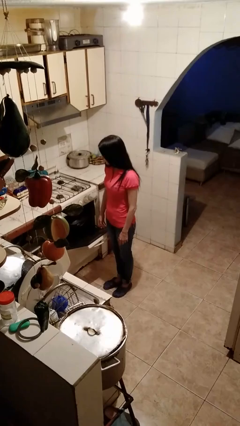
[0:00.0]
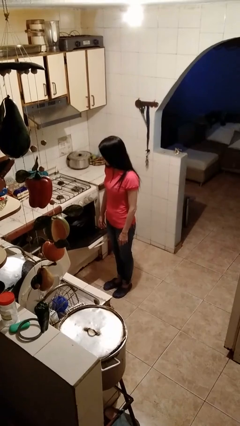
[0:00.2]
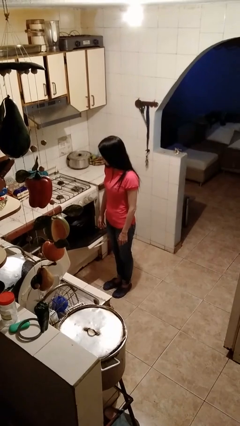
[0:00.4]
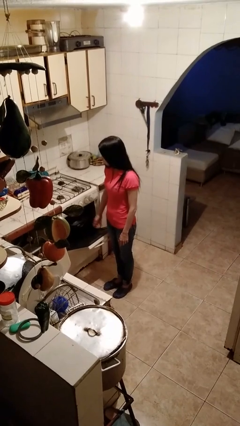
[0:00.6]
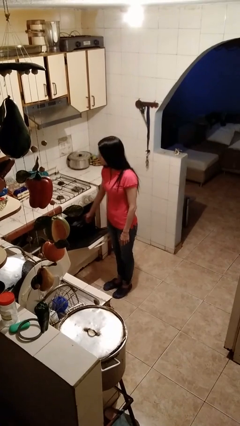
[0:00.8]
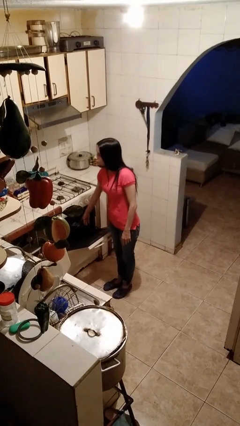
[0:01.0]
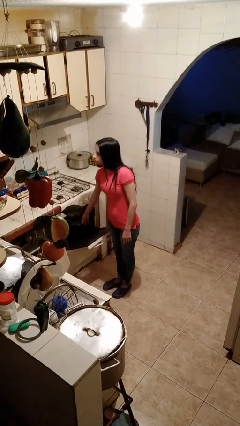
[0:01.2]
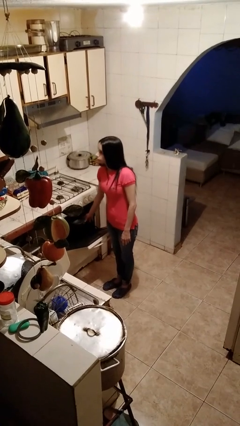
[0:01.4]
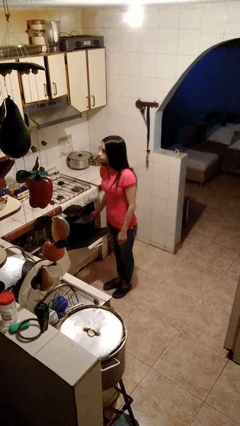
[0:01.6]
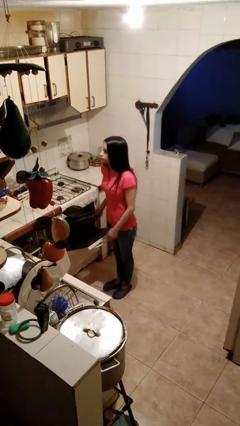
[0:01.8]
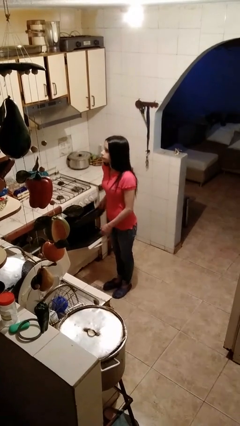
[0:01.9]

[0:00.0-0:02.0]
person takes object from oven

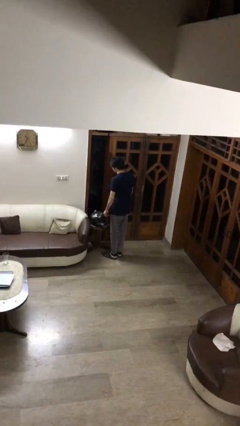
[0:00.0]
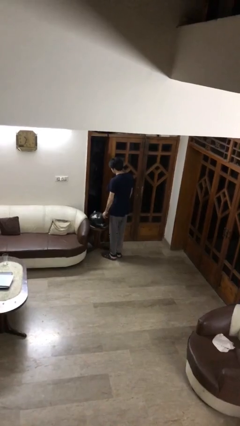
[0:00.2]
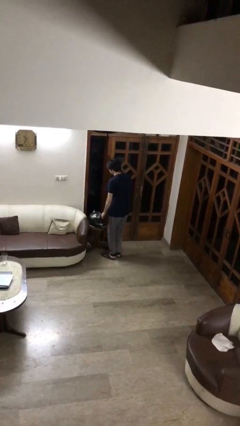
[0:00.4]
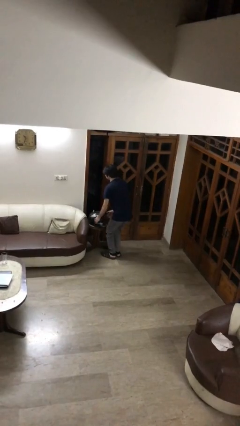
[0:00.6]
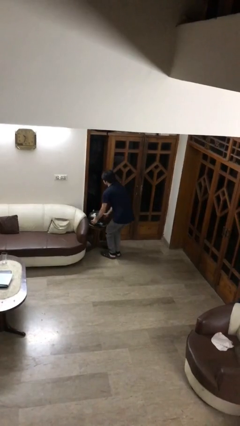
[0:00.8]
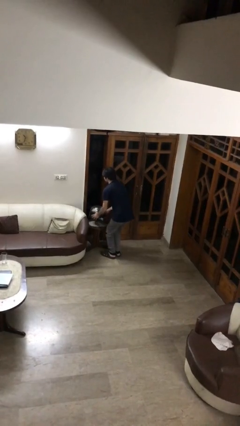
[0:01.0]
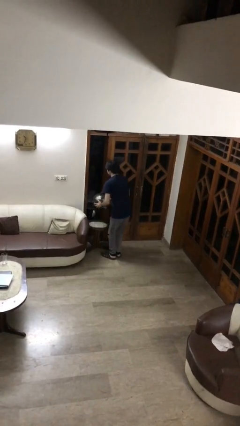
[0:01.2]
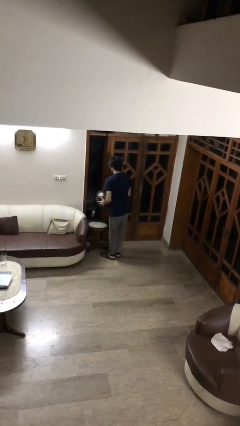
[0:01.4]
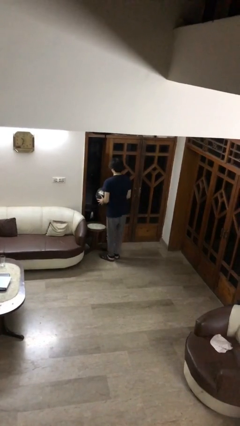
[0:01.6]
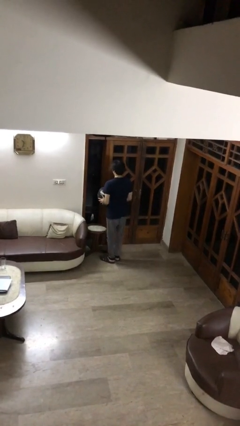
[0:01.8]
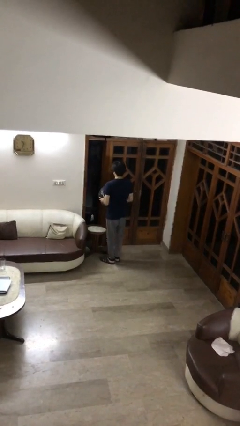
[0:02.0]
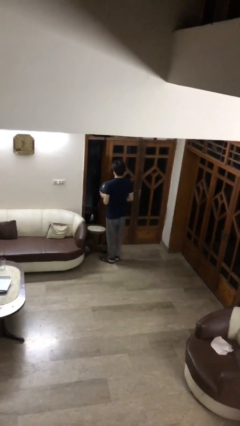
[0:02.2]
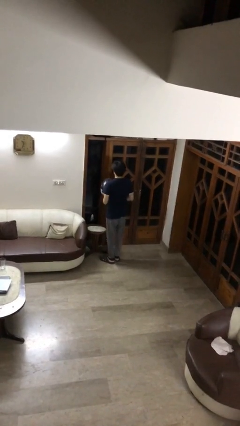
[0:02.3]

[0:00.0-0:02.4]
person picks up object from table

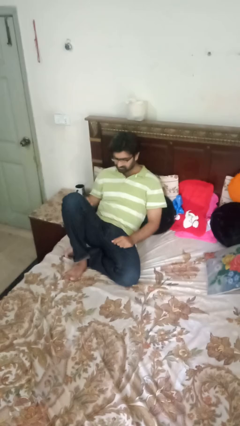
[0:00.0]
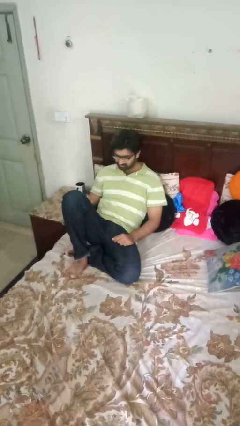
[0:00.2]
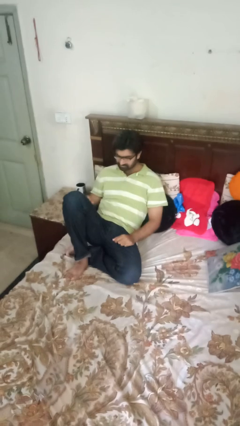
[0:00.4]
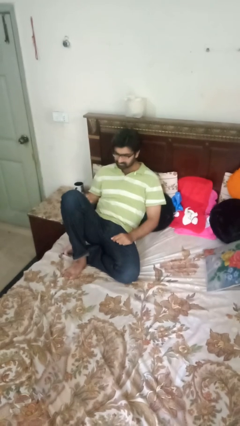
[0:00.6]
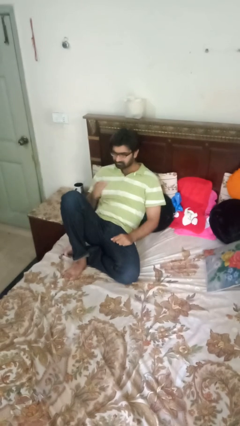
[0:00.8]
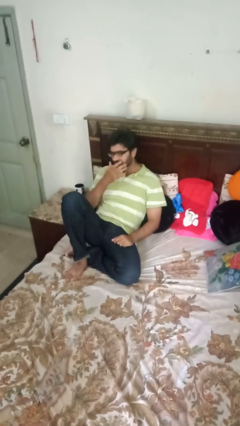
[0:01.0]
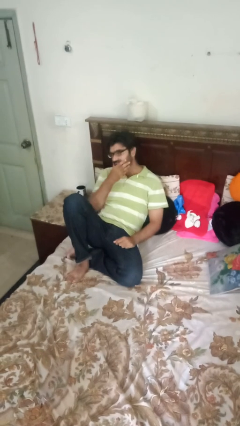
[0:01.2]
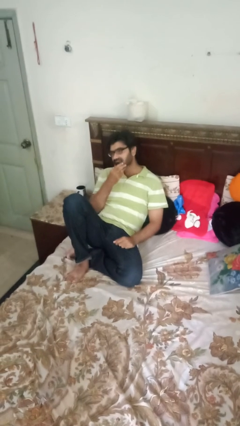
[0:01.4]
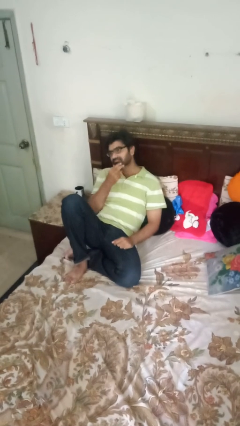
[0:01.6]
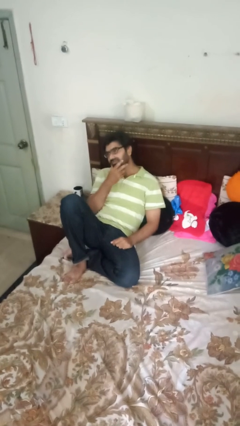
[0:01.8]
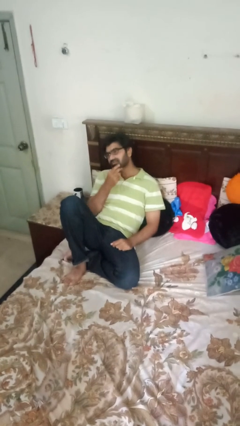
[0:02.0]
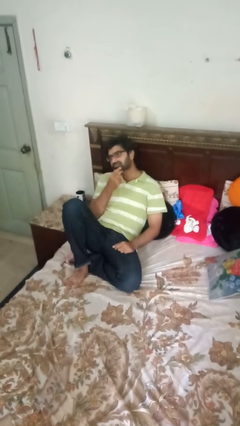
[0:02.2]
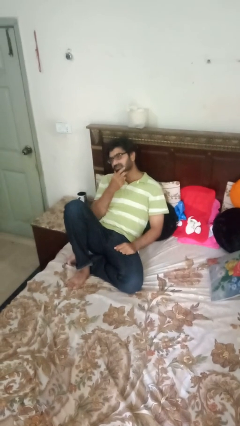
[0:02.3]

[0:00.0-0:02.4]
person strokes chin

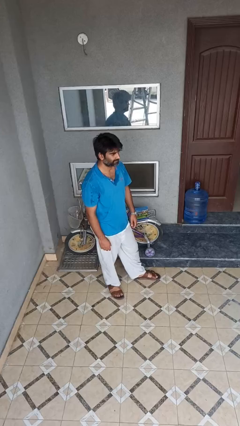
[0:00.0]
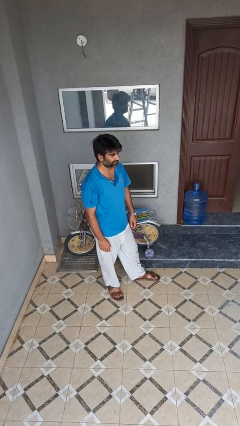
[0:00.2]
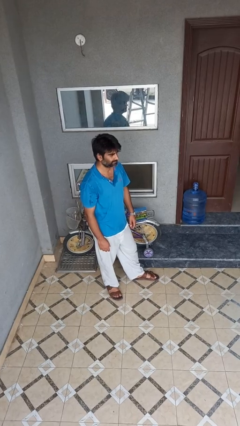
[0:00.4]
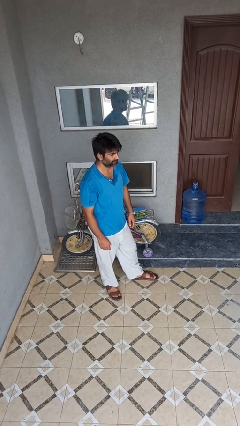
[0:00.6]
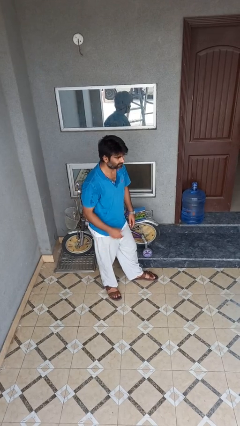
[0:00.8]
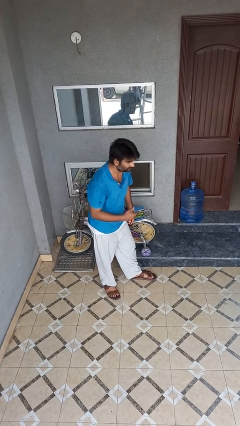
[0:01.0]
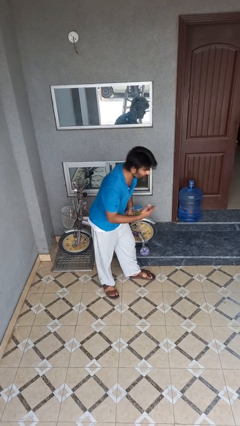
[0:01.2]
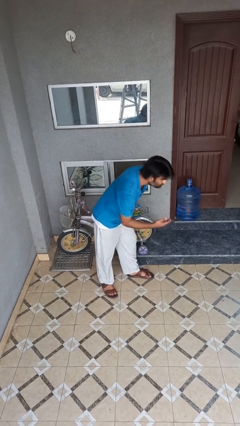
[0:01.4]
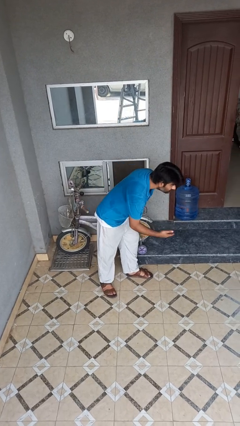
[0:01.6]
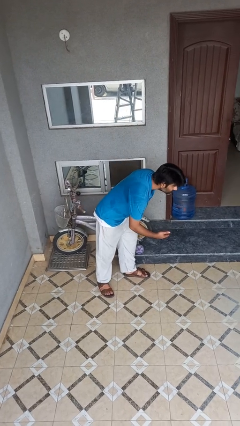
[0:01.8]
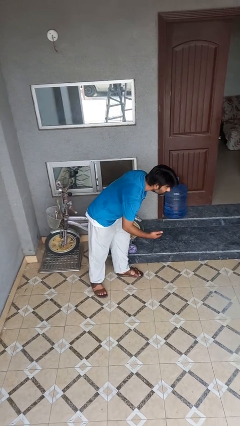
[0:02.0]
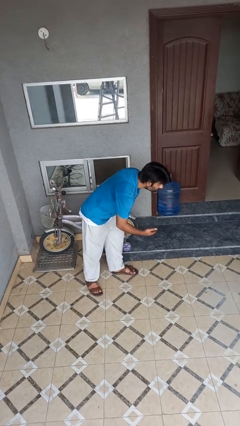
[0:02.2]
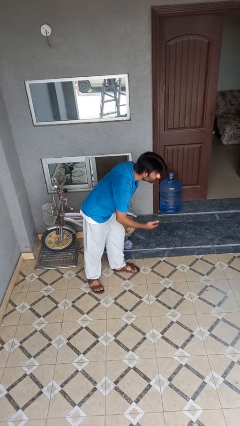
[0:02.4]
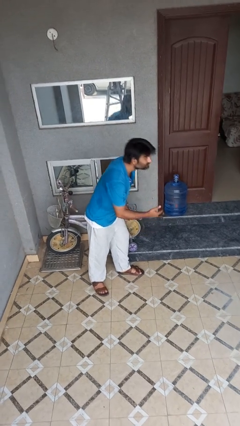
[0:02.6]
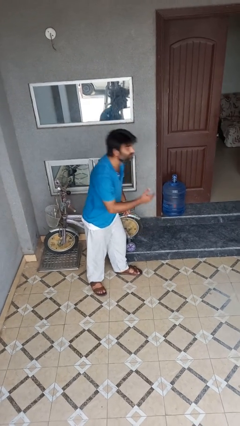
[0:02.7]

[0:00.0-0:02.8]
person bows

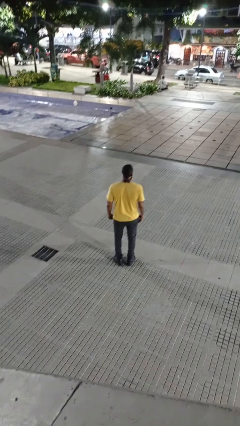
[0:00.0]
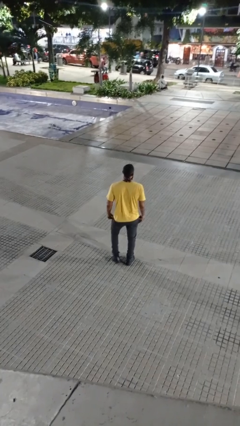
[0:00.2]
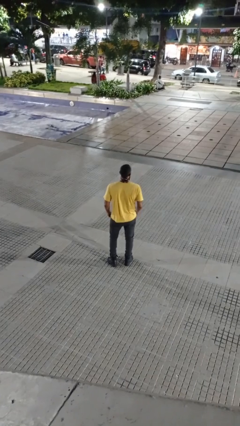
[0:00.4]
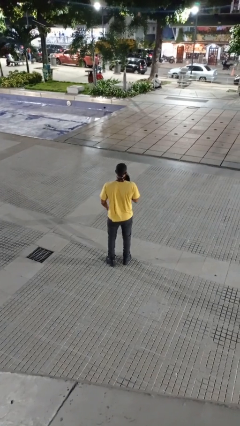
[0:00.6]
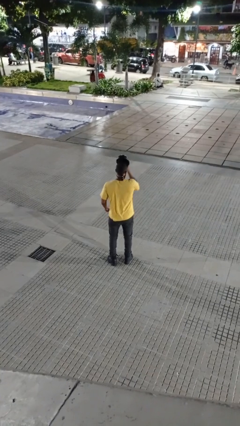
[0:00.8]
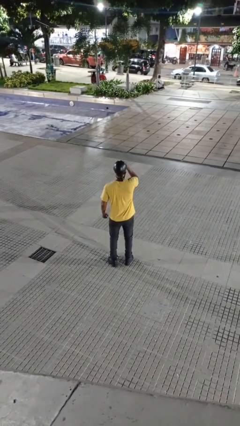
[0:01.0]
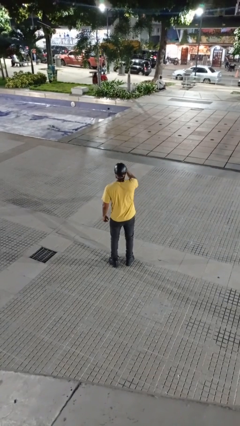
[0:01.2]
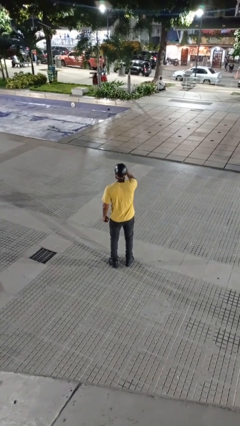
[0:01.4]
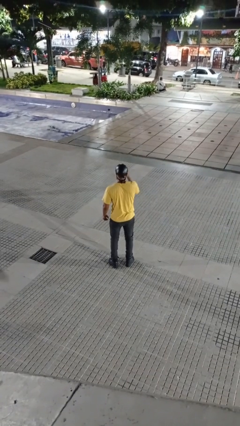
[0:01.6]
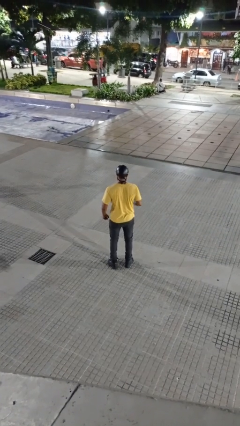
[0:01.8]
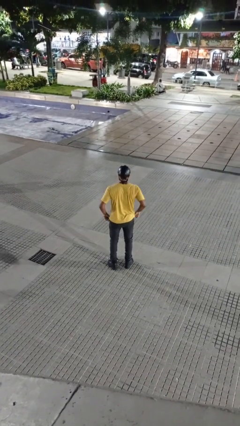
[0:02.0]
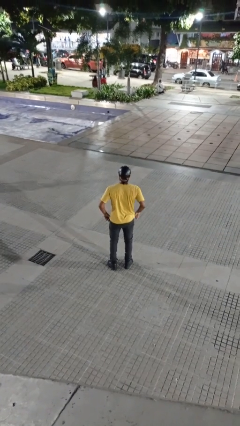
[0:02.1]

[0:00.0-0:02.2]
person puts on hat

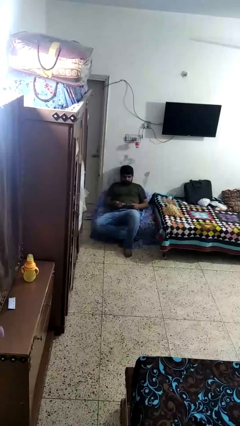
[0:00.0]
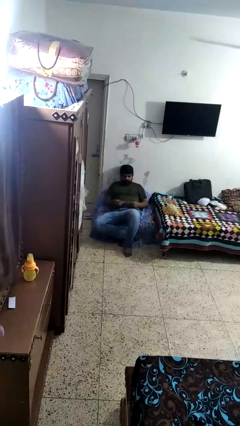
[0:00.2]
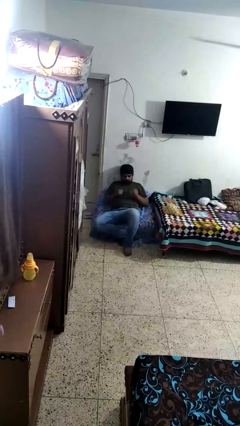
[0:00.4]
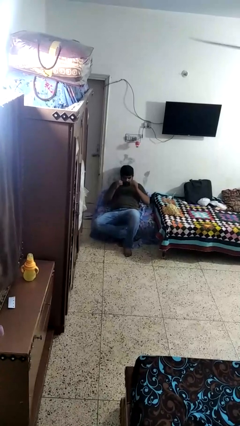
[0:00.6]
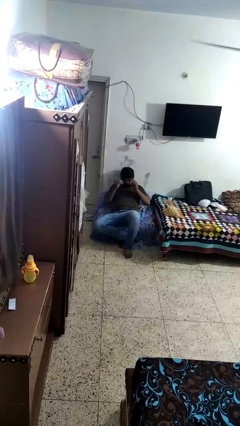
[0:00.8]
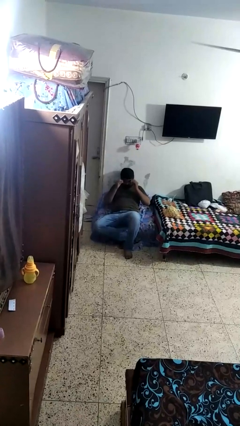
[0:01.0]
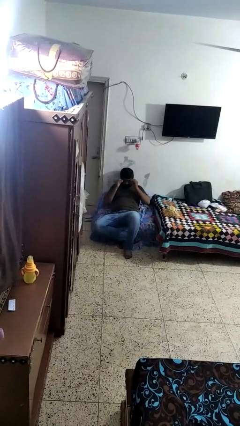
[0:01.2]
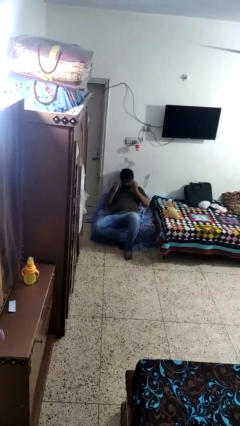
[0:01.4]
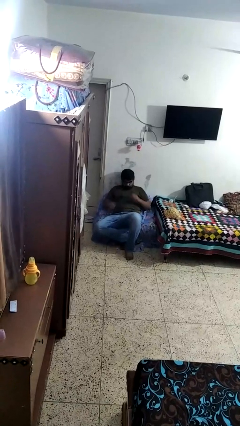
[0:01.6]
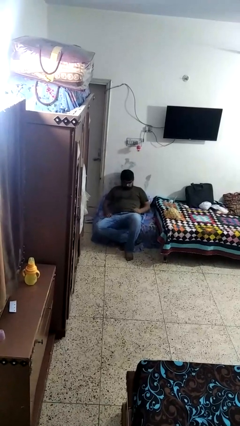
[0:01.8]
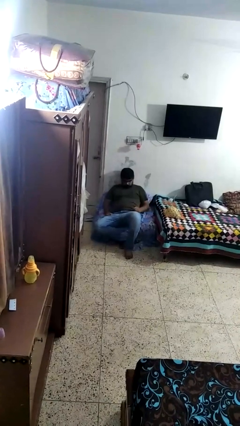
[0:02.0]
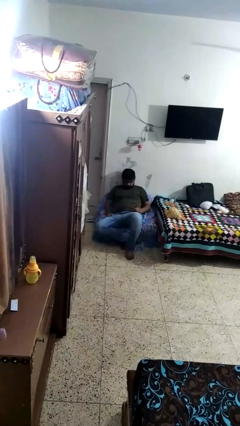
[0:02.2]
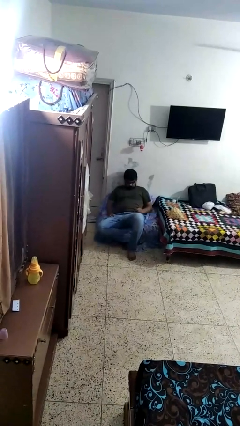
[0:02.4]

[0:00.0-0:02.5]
person puts on glasses

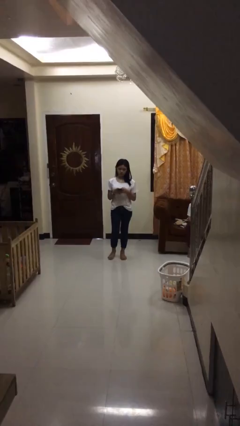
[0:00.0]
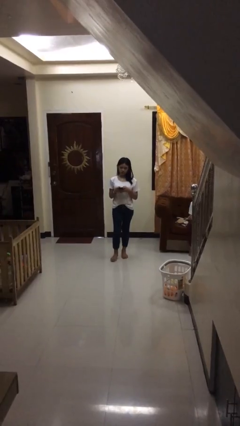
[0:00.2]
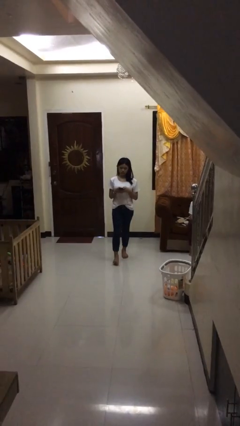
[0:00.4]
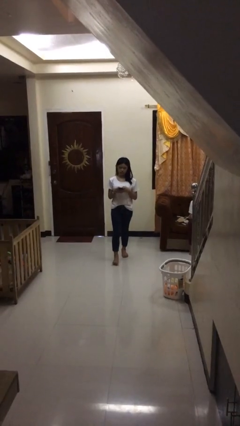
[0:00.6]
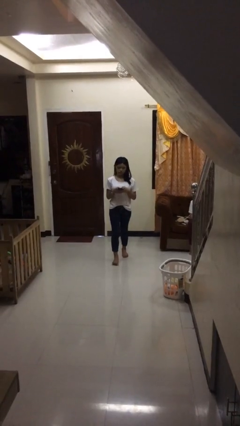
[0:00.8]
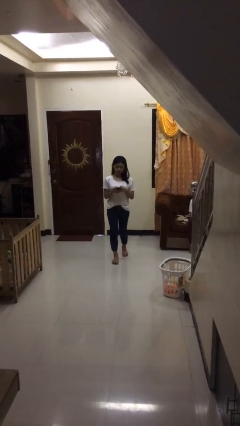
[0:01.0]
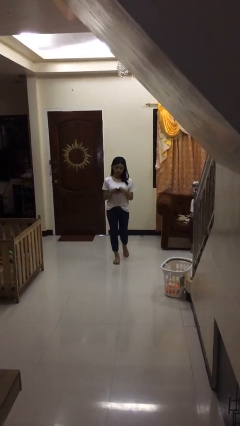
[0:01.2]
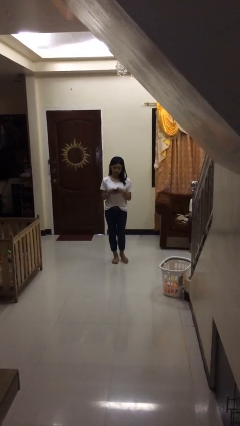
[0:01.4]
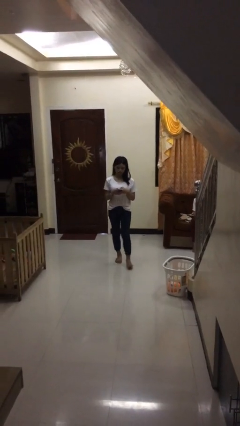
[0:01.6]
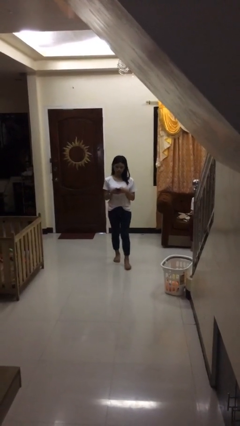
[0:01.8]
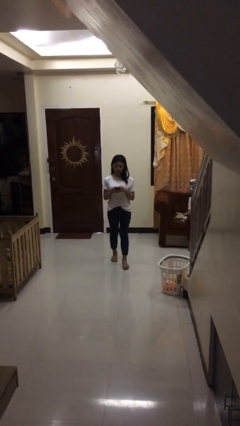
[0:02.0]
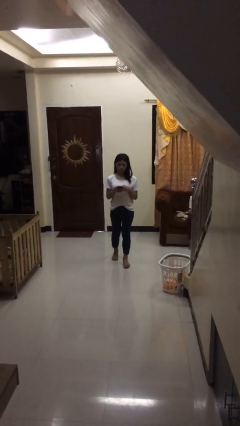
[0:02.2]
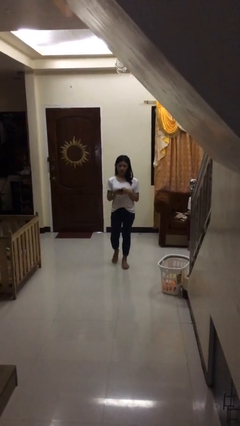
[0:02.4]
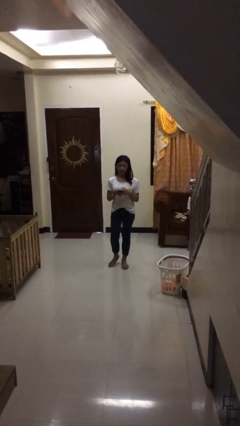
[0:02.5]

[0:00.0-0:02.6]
person texts on phone

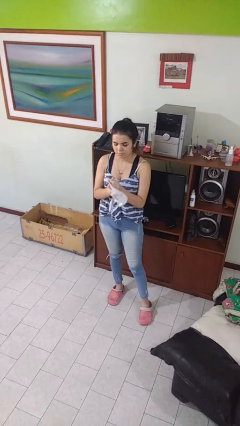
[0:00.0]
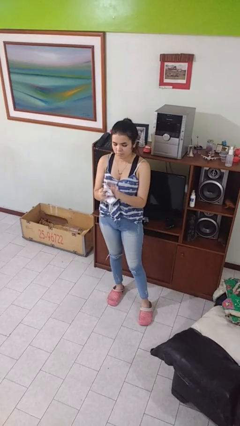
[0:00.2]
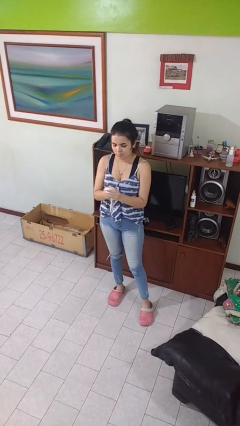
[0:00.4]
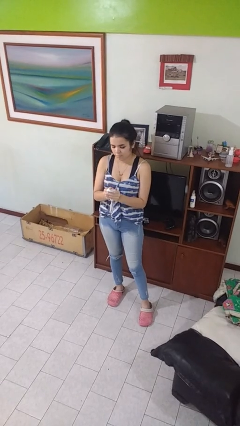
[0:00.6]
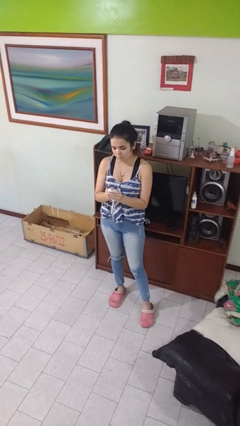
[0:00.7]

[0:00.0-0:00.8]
person crumples paper
